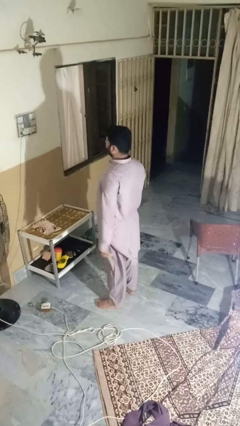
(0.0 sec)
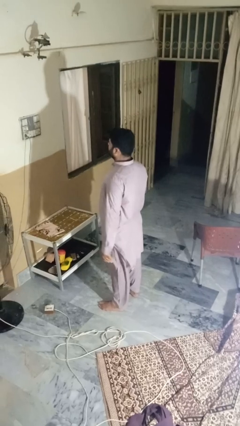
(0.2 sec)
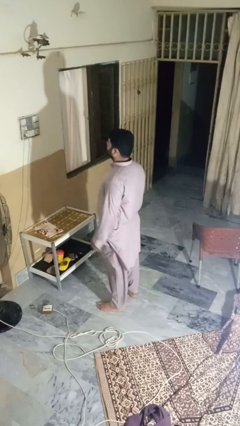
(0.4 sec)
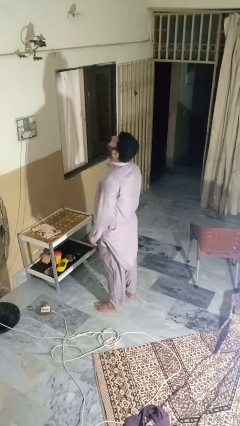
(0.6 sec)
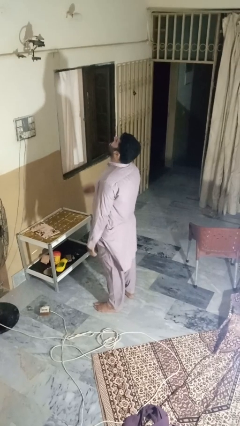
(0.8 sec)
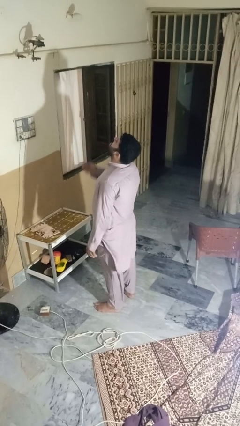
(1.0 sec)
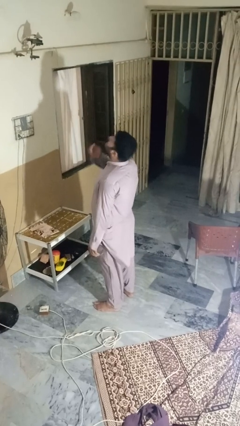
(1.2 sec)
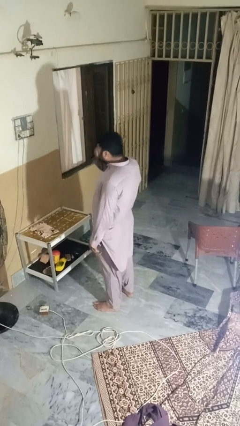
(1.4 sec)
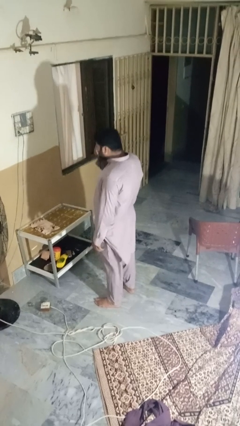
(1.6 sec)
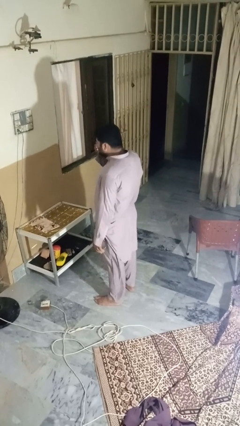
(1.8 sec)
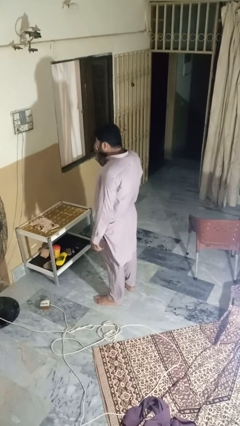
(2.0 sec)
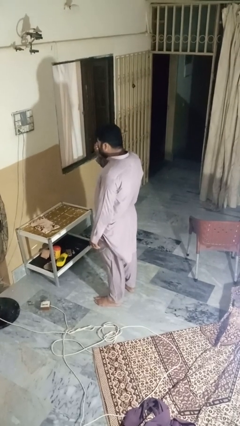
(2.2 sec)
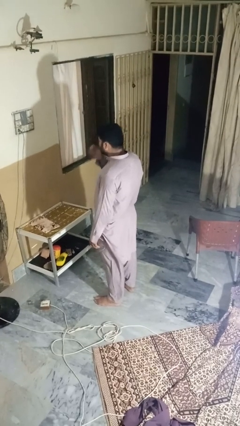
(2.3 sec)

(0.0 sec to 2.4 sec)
person sneezes into hand

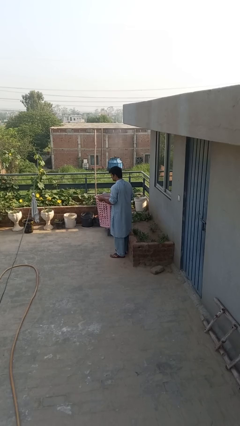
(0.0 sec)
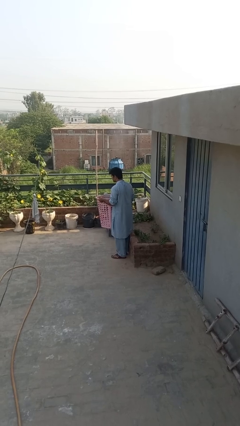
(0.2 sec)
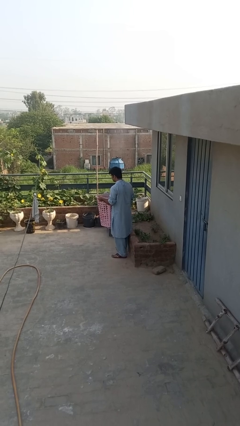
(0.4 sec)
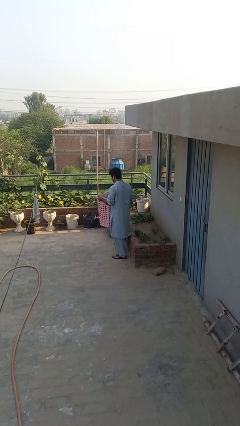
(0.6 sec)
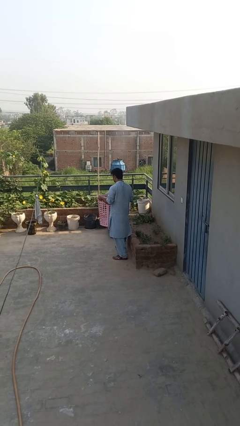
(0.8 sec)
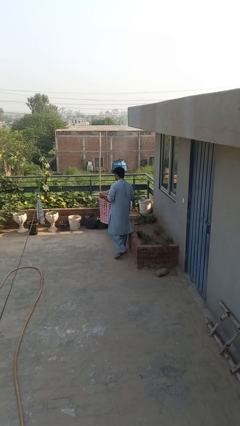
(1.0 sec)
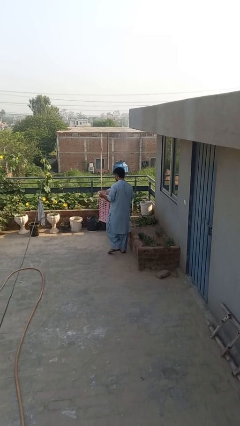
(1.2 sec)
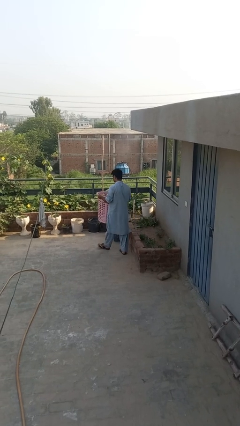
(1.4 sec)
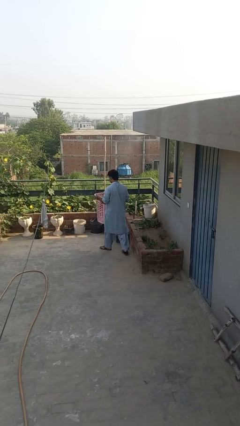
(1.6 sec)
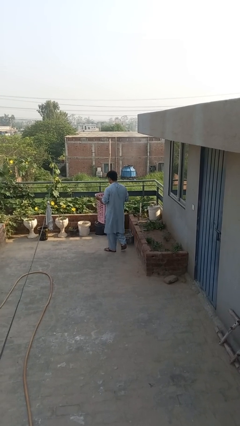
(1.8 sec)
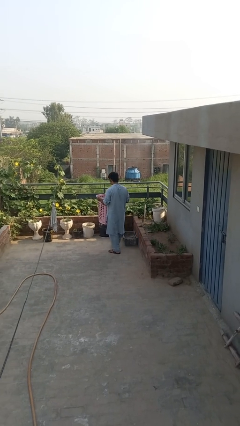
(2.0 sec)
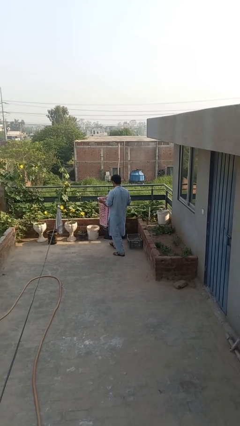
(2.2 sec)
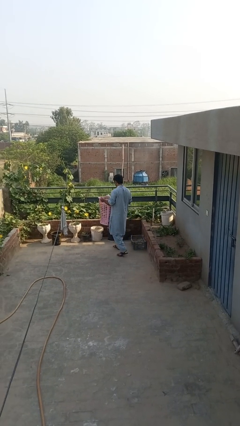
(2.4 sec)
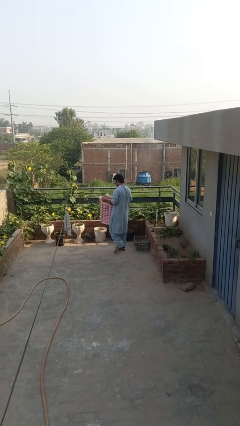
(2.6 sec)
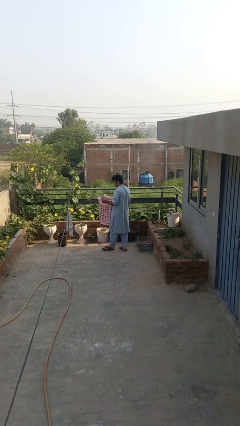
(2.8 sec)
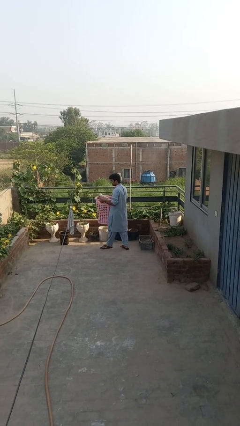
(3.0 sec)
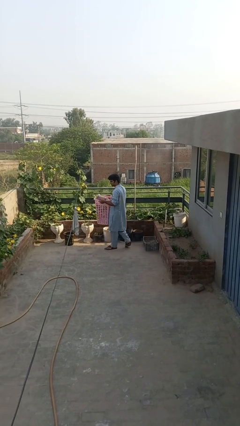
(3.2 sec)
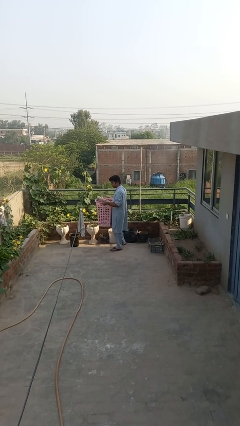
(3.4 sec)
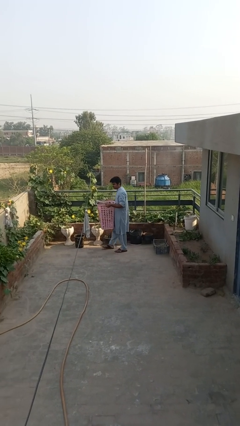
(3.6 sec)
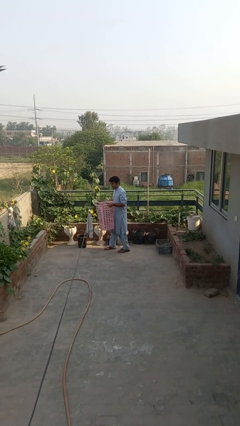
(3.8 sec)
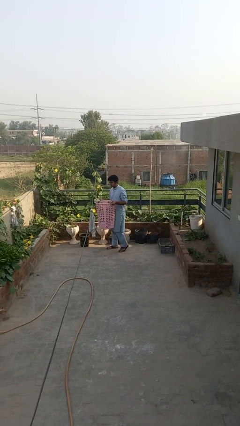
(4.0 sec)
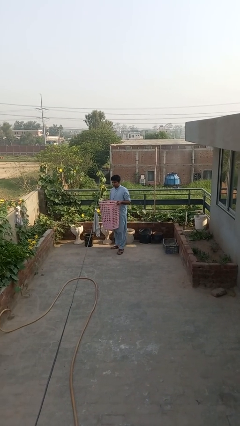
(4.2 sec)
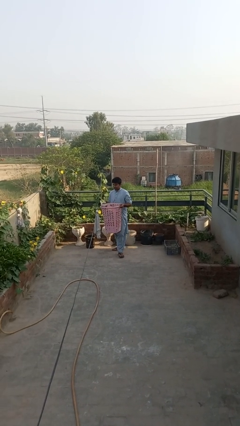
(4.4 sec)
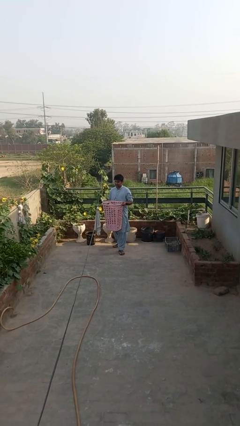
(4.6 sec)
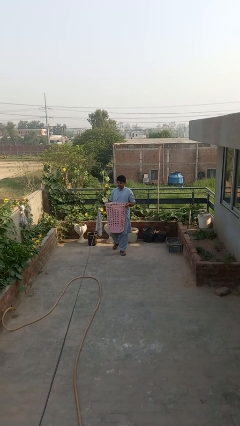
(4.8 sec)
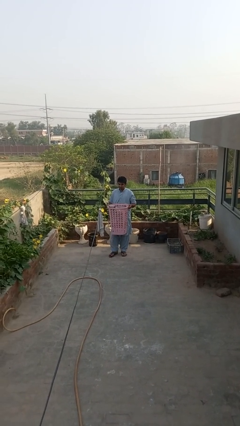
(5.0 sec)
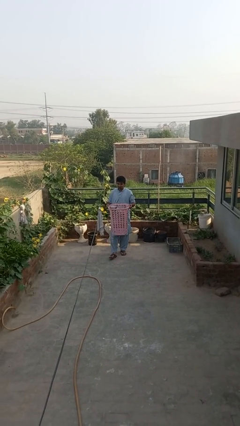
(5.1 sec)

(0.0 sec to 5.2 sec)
person carries laundry basket

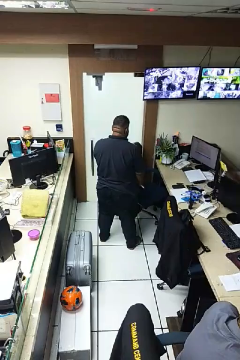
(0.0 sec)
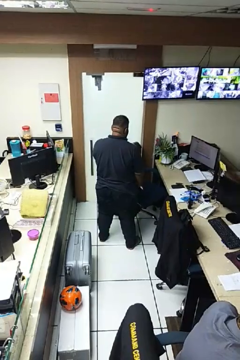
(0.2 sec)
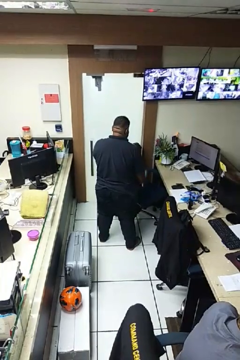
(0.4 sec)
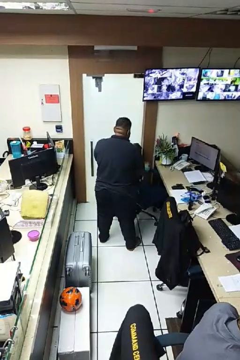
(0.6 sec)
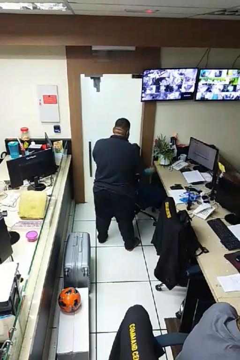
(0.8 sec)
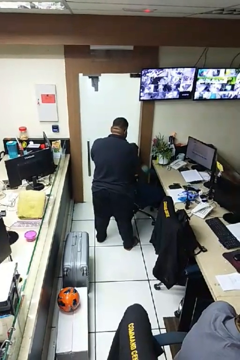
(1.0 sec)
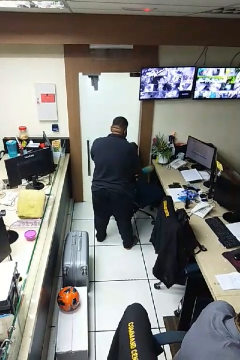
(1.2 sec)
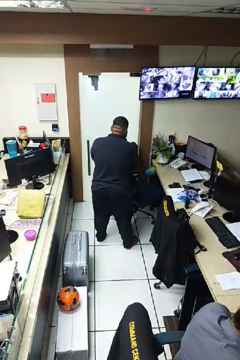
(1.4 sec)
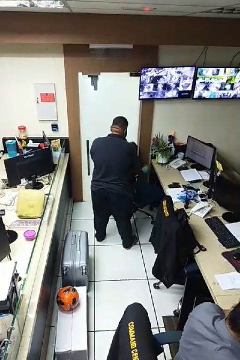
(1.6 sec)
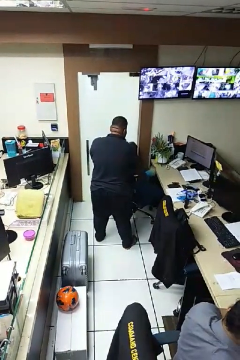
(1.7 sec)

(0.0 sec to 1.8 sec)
person dusts furniture

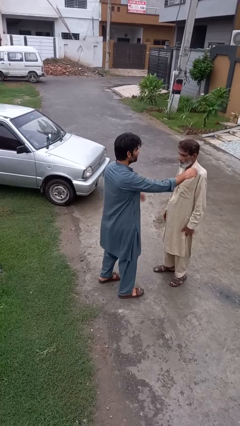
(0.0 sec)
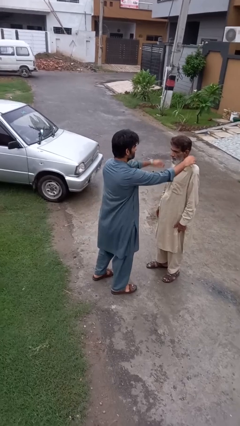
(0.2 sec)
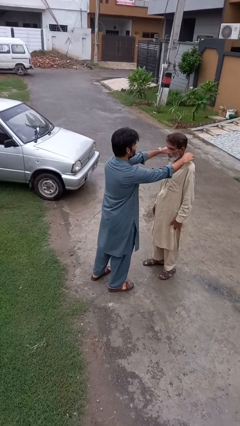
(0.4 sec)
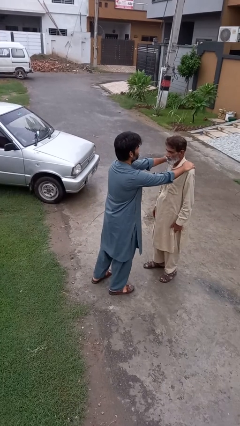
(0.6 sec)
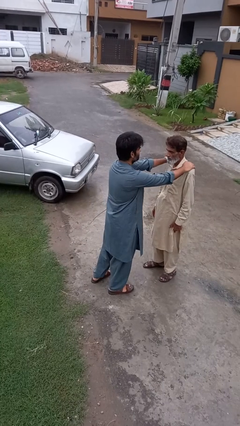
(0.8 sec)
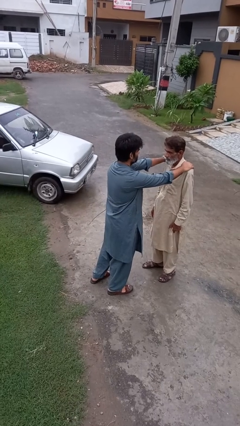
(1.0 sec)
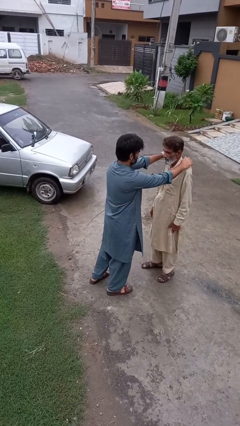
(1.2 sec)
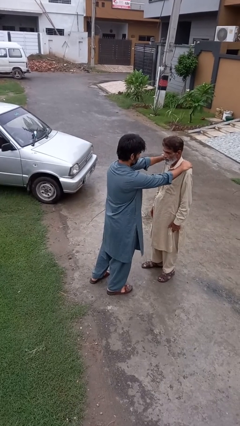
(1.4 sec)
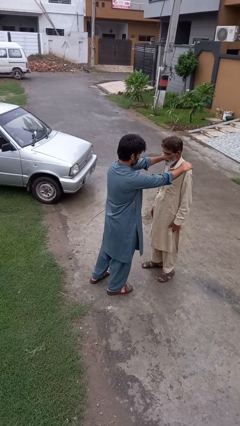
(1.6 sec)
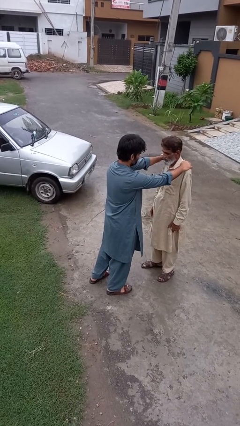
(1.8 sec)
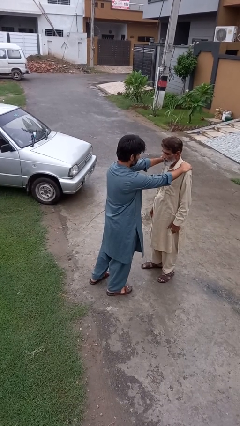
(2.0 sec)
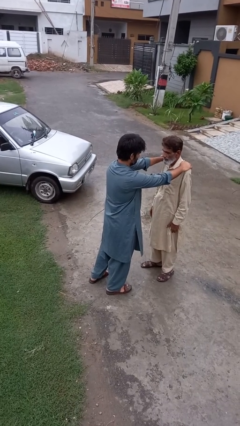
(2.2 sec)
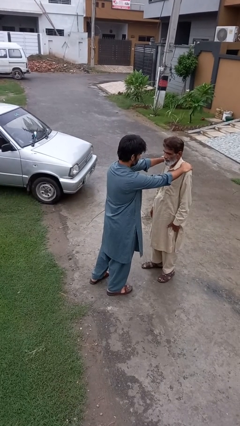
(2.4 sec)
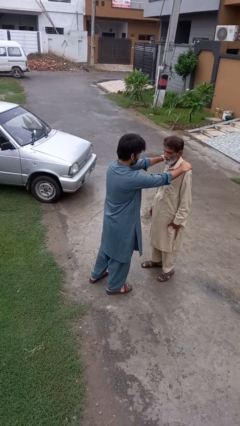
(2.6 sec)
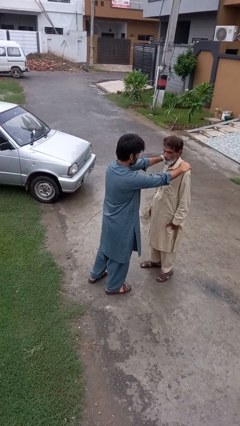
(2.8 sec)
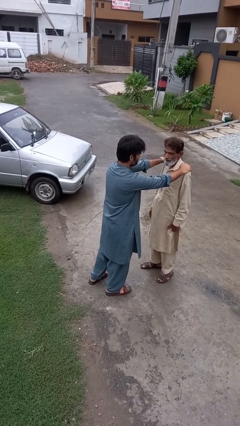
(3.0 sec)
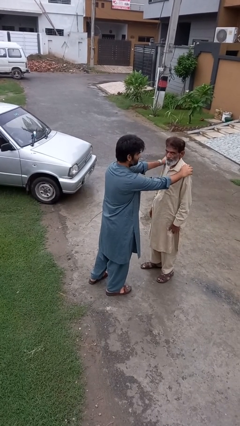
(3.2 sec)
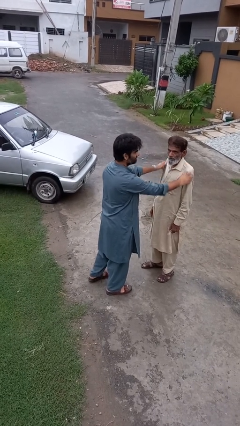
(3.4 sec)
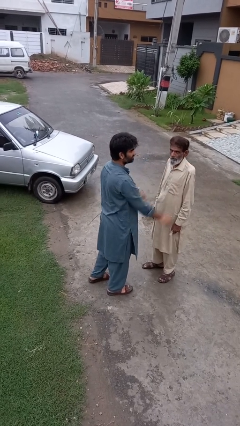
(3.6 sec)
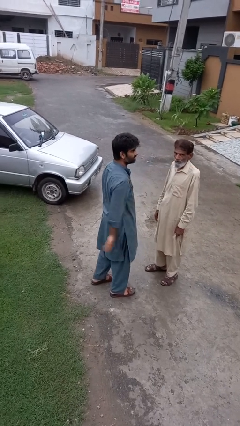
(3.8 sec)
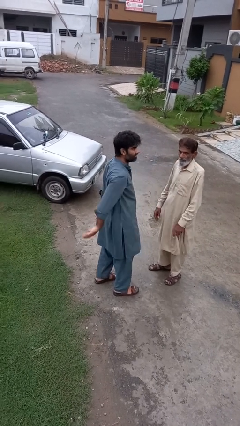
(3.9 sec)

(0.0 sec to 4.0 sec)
person pounds shoulders of person

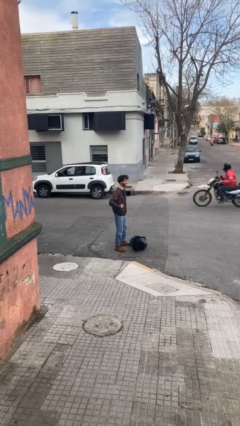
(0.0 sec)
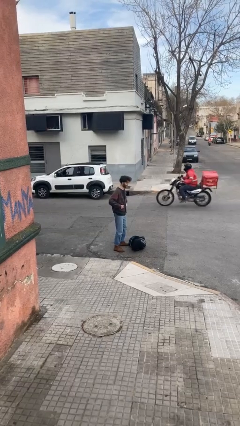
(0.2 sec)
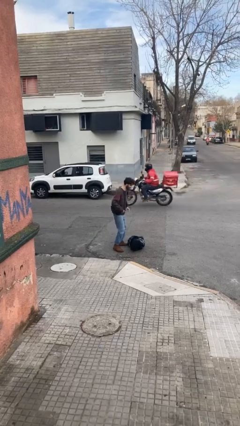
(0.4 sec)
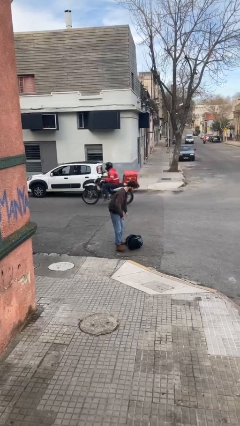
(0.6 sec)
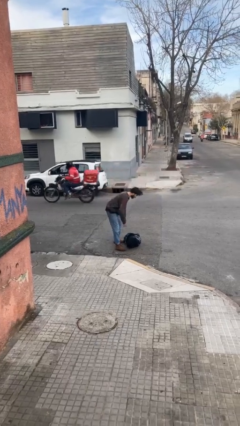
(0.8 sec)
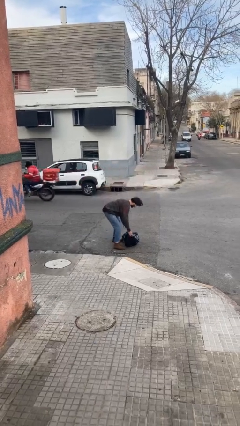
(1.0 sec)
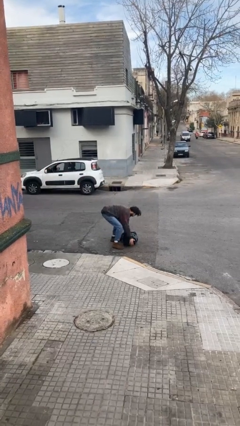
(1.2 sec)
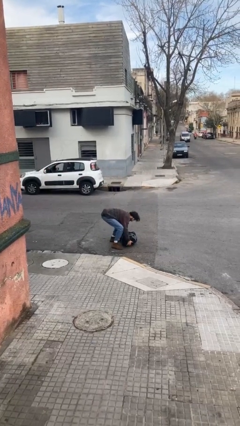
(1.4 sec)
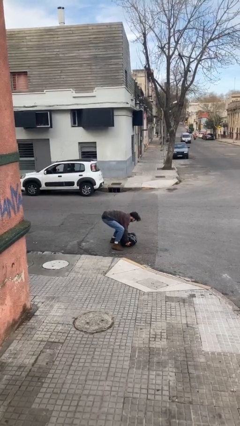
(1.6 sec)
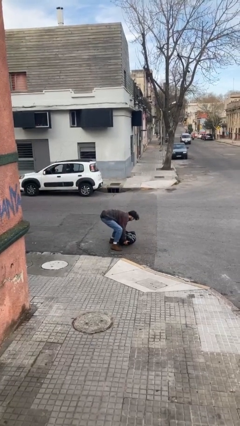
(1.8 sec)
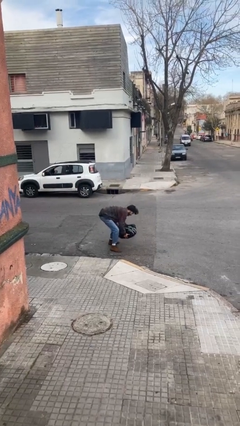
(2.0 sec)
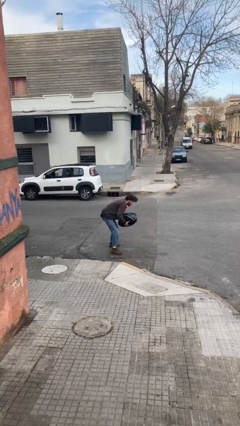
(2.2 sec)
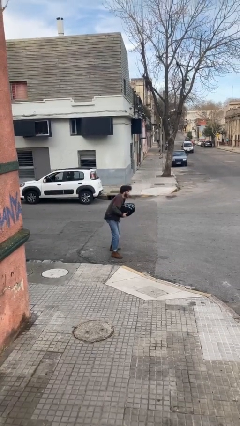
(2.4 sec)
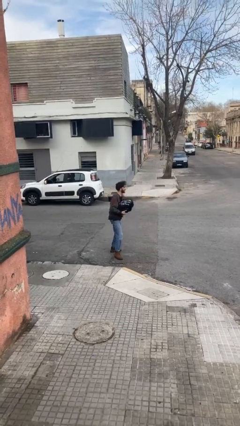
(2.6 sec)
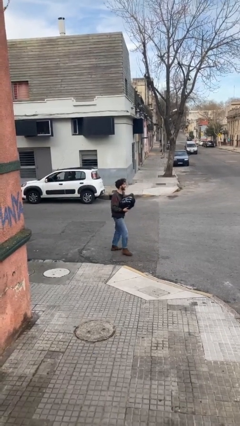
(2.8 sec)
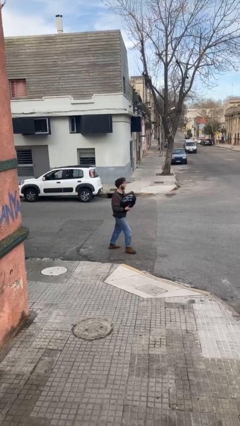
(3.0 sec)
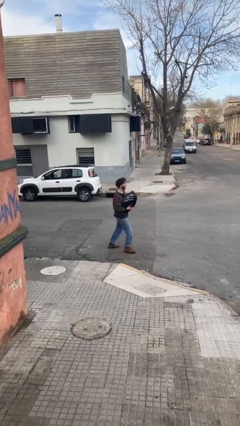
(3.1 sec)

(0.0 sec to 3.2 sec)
person picks up object from floor

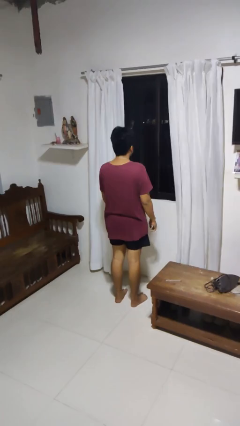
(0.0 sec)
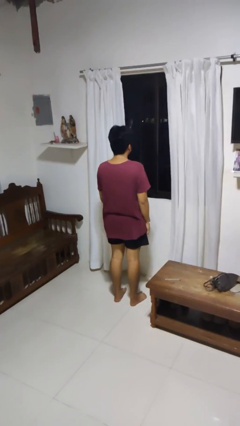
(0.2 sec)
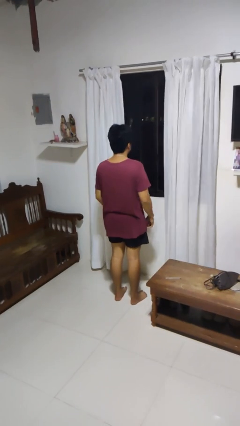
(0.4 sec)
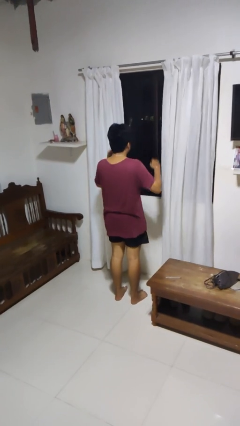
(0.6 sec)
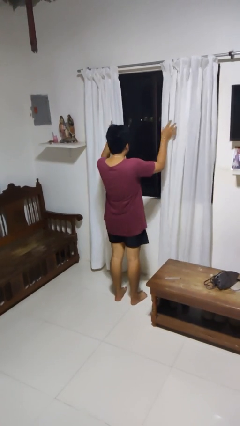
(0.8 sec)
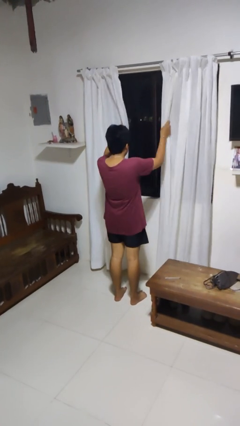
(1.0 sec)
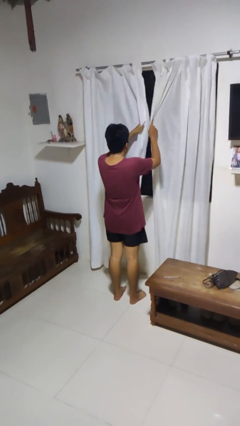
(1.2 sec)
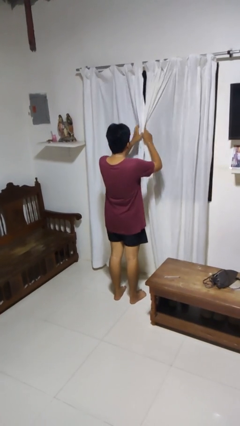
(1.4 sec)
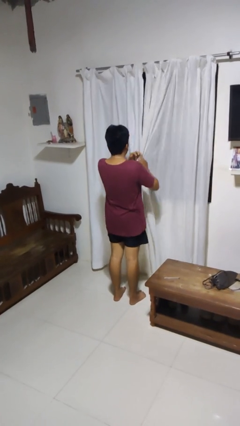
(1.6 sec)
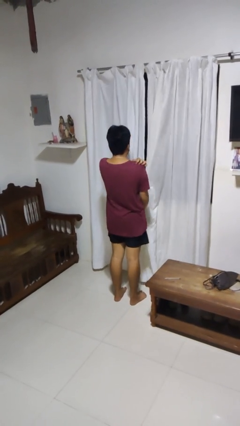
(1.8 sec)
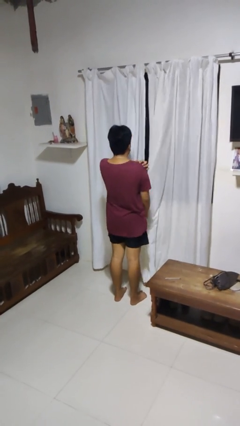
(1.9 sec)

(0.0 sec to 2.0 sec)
person closes curtains
